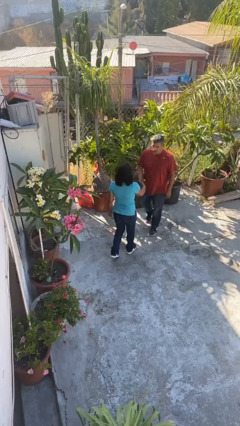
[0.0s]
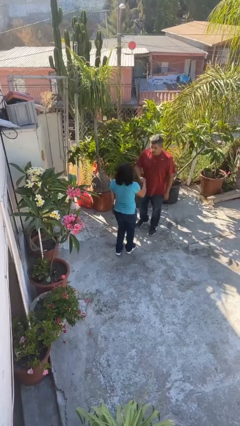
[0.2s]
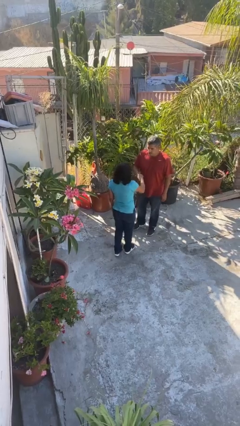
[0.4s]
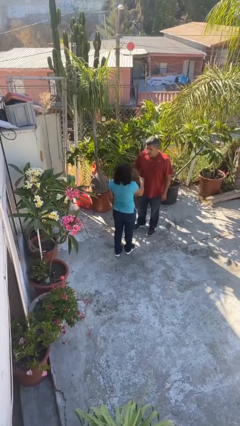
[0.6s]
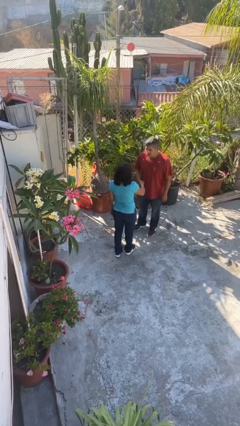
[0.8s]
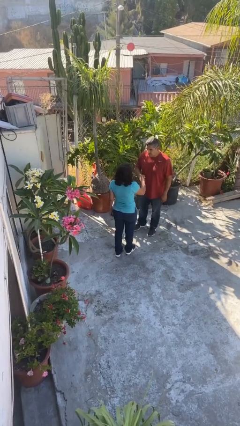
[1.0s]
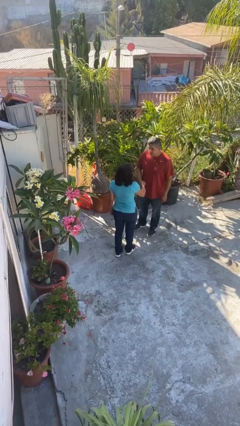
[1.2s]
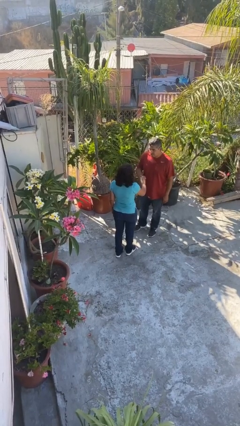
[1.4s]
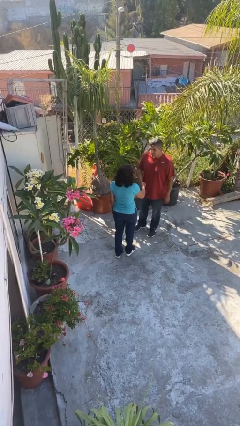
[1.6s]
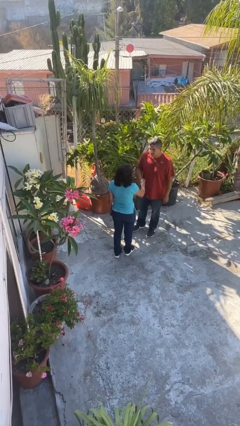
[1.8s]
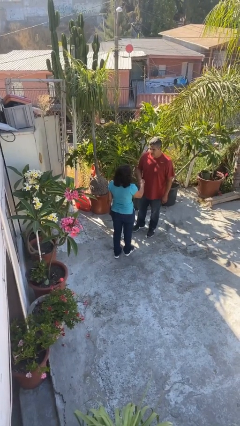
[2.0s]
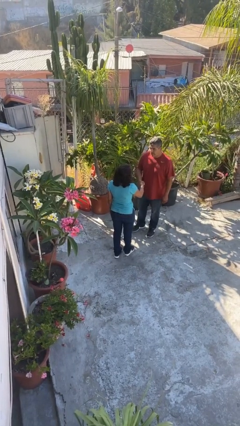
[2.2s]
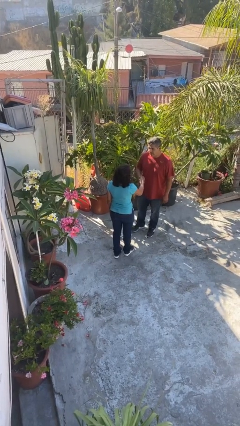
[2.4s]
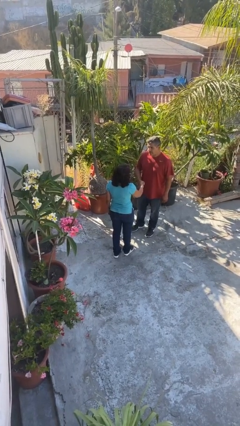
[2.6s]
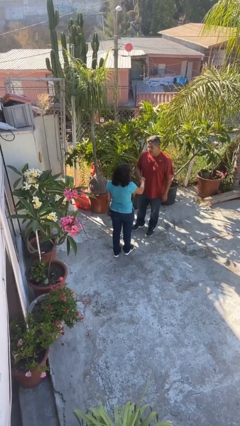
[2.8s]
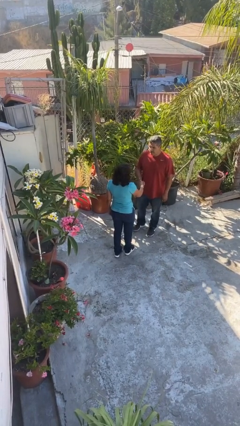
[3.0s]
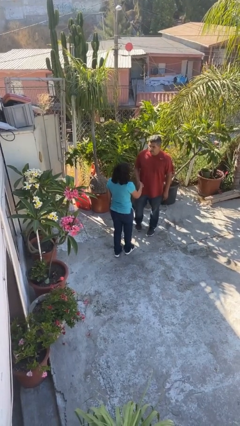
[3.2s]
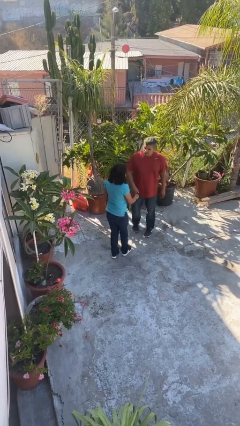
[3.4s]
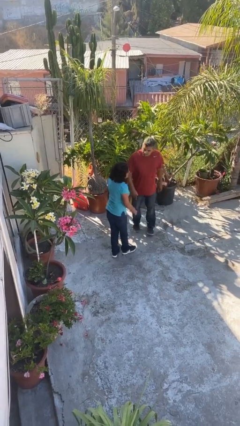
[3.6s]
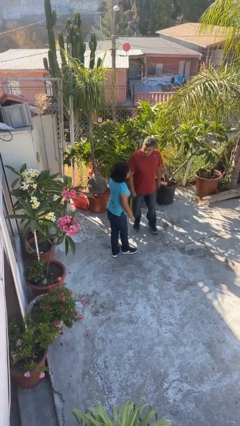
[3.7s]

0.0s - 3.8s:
person shakes hand

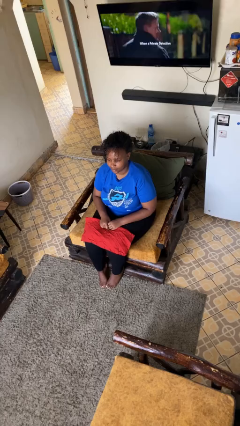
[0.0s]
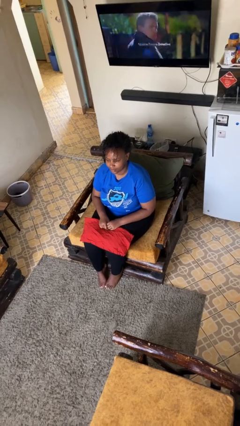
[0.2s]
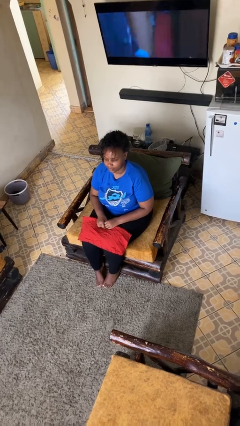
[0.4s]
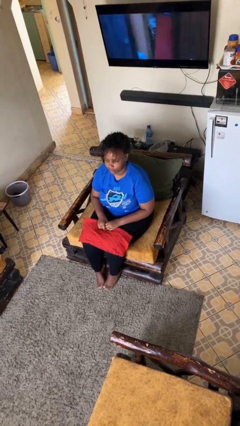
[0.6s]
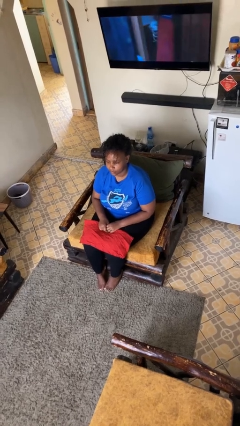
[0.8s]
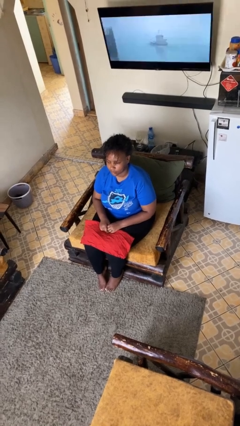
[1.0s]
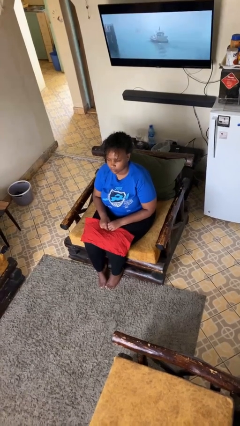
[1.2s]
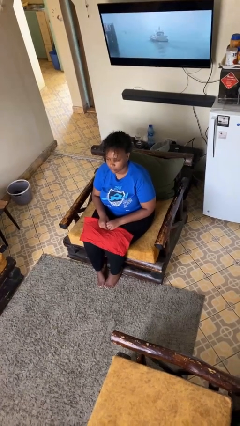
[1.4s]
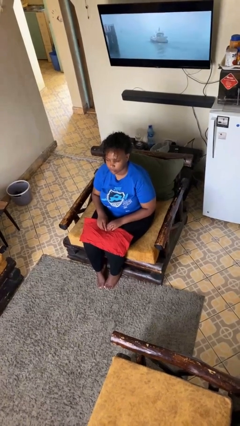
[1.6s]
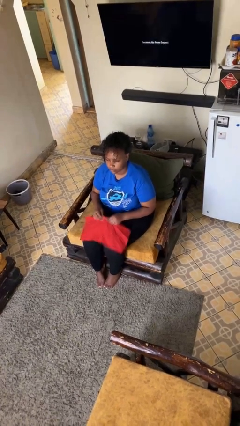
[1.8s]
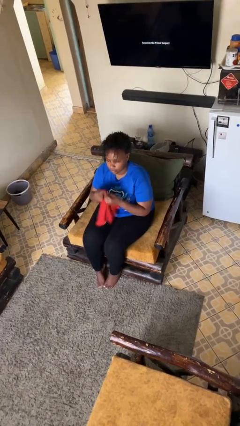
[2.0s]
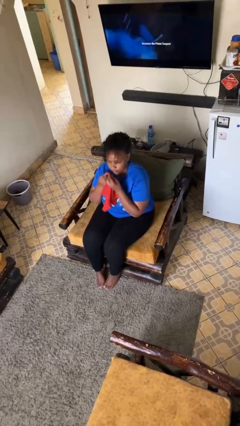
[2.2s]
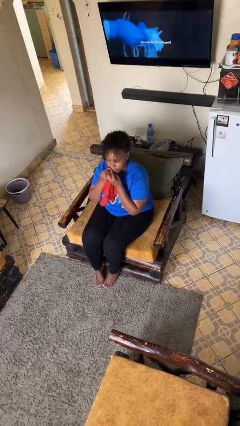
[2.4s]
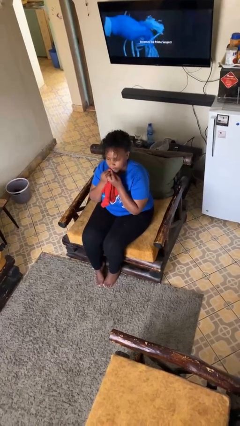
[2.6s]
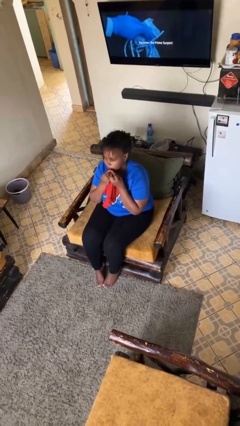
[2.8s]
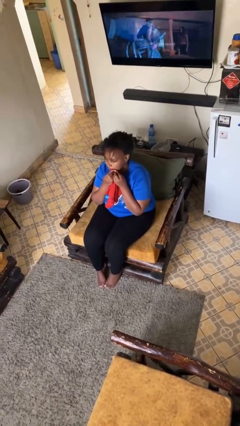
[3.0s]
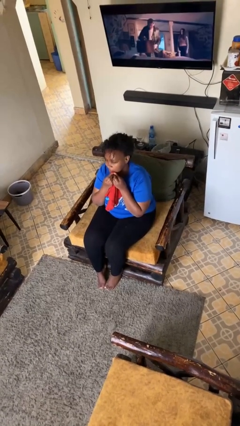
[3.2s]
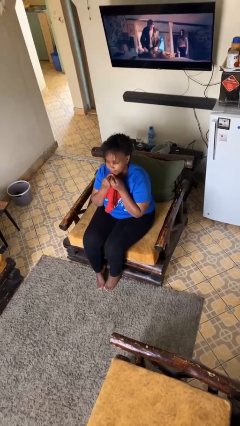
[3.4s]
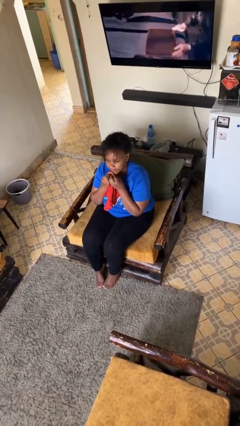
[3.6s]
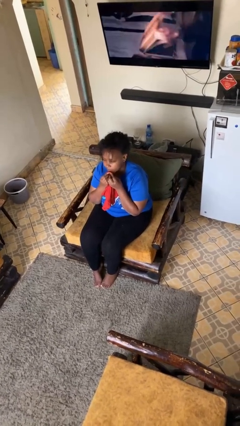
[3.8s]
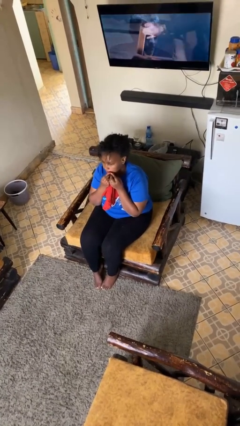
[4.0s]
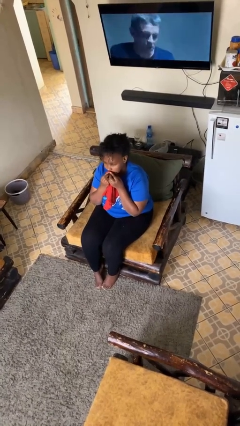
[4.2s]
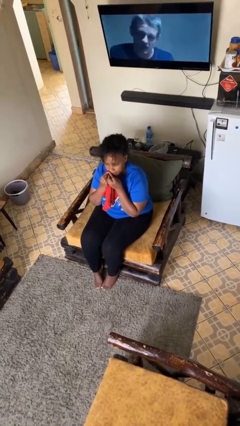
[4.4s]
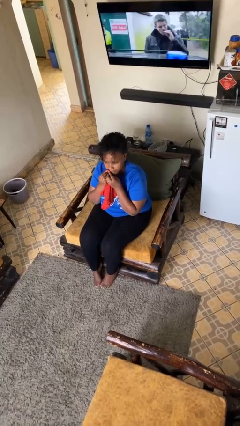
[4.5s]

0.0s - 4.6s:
person wipes mouth with napkin

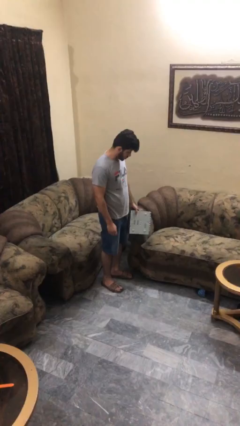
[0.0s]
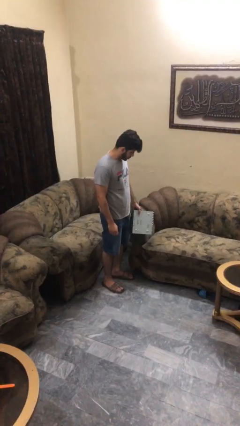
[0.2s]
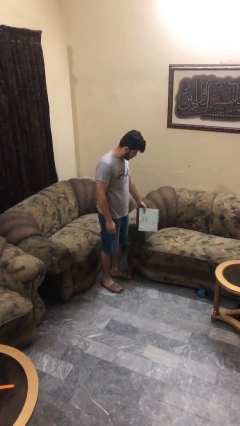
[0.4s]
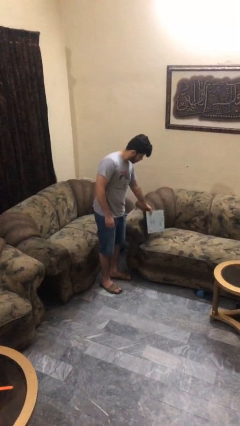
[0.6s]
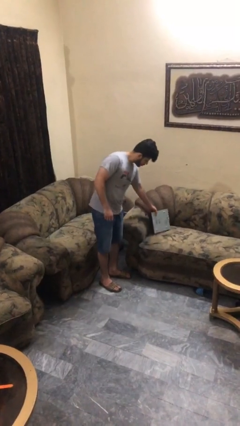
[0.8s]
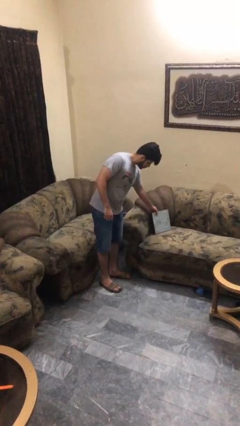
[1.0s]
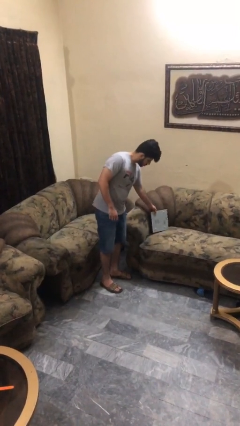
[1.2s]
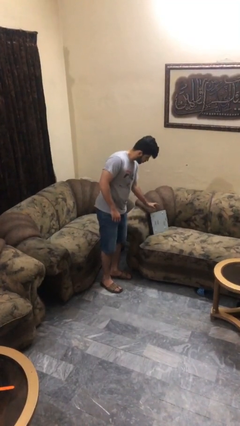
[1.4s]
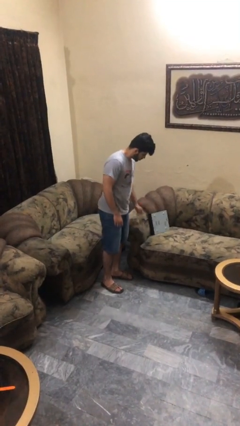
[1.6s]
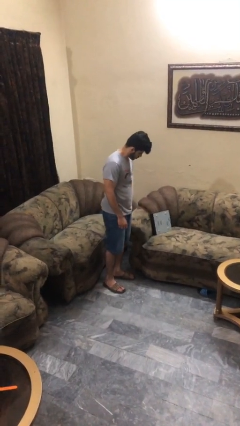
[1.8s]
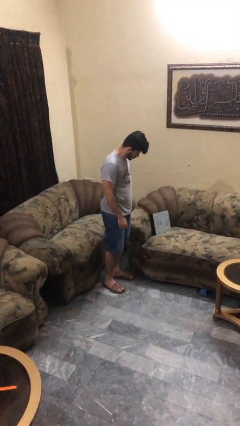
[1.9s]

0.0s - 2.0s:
person puts down object on couch

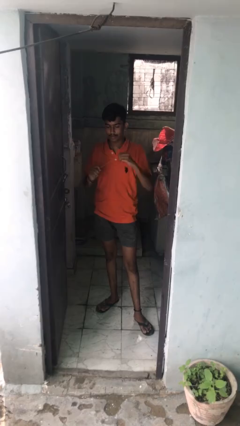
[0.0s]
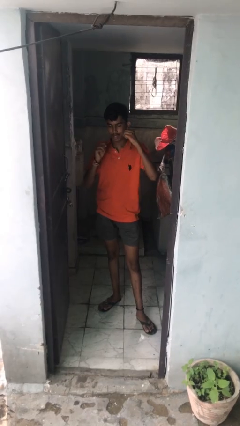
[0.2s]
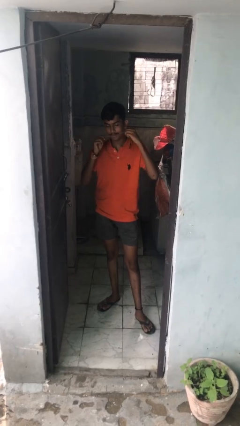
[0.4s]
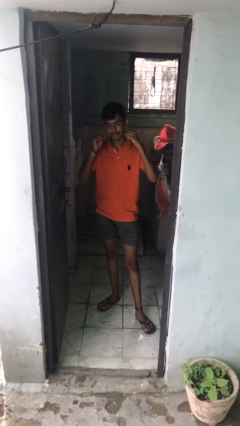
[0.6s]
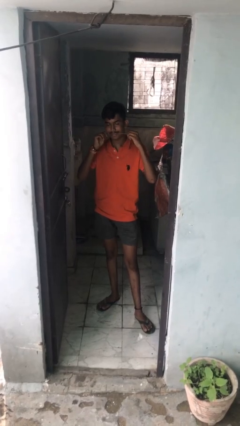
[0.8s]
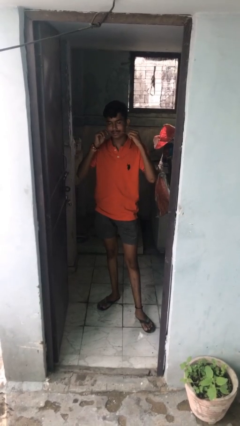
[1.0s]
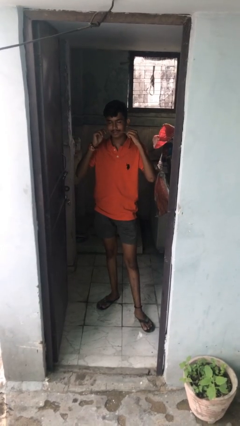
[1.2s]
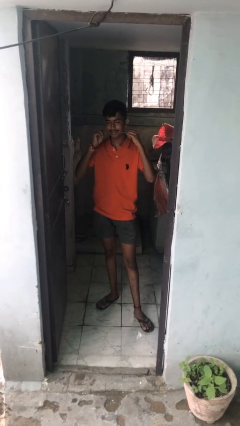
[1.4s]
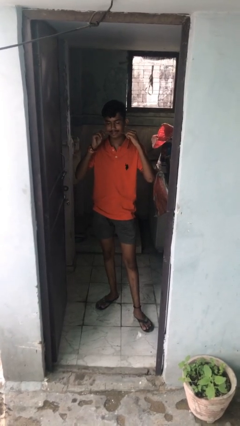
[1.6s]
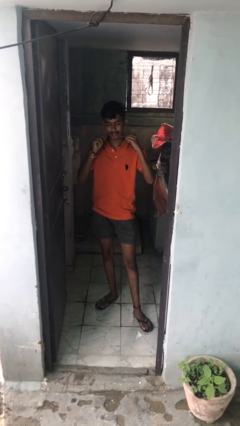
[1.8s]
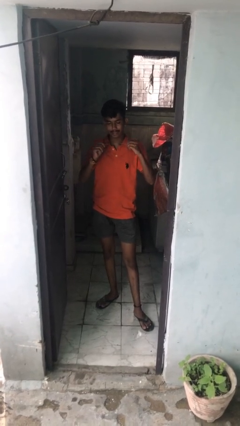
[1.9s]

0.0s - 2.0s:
person flosses

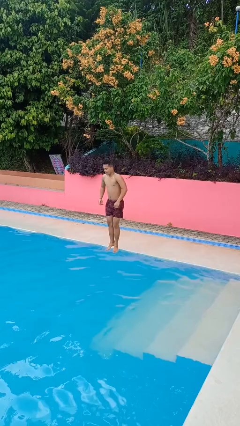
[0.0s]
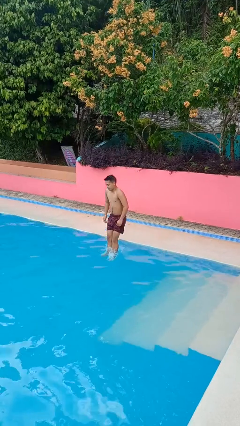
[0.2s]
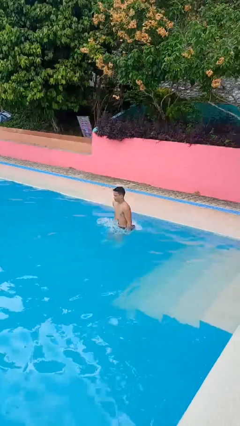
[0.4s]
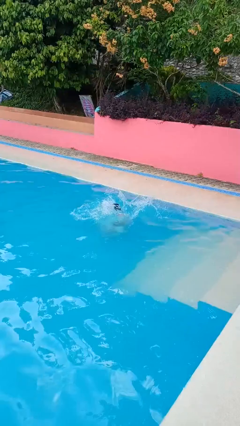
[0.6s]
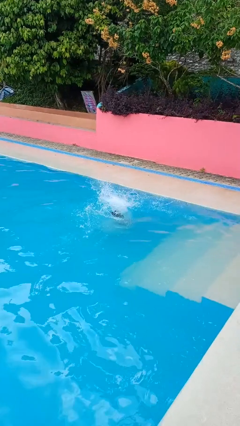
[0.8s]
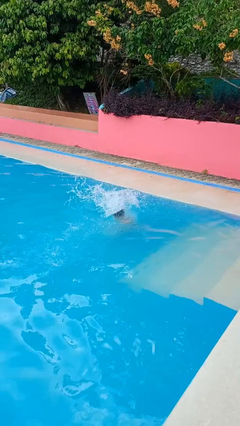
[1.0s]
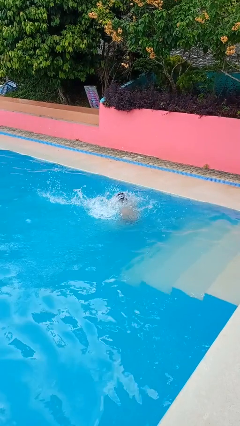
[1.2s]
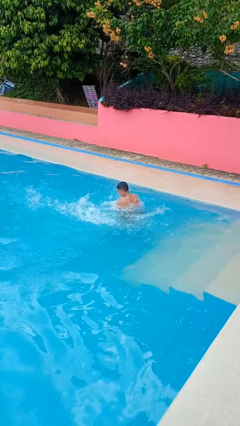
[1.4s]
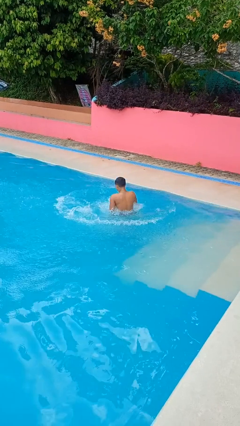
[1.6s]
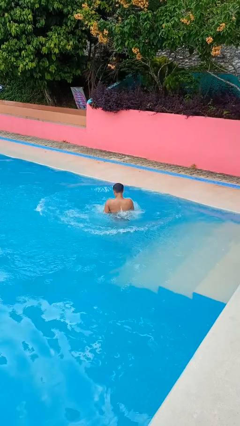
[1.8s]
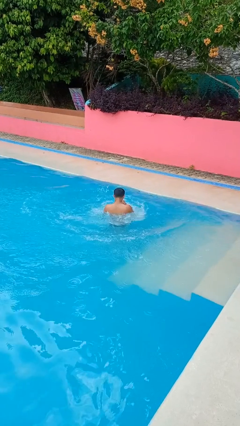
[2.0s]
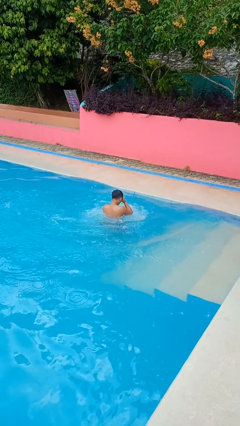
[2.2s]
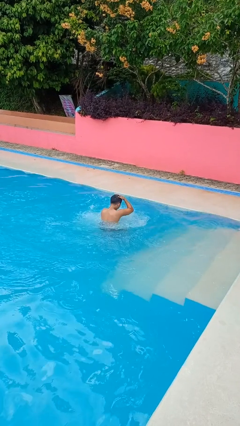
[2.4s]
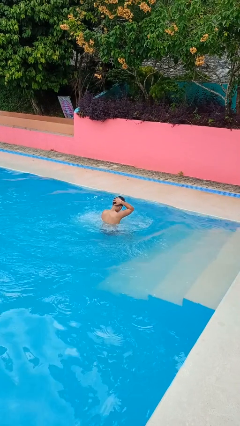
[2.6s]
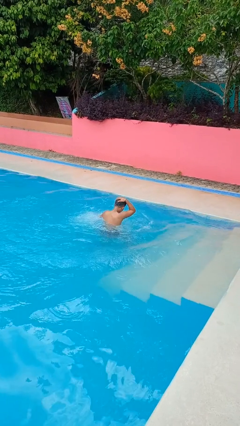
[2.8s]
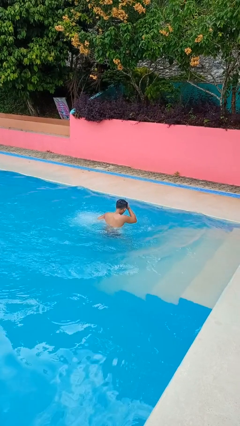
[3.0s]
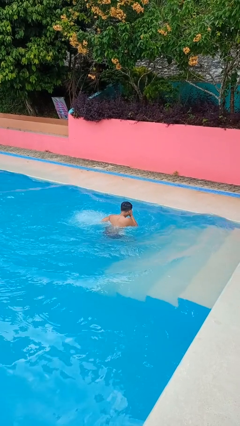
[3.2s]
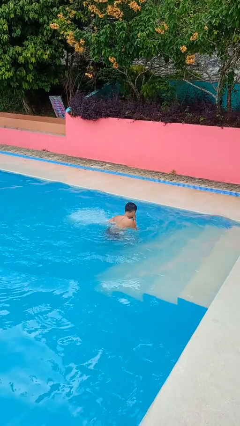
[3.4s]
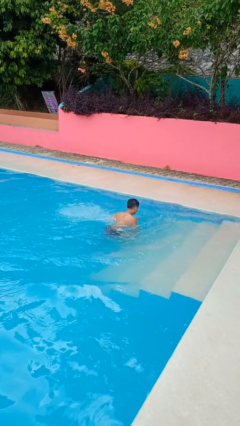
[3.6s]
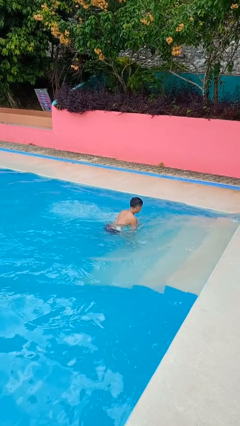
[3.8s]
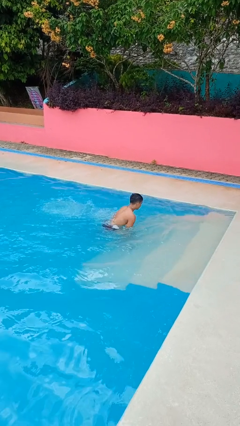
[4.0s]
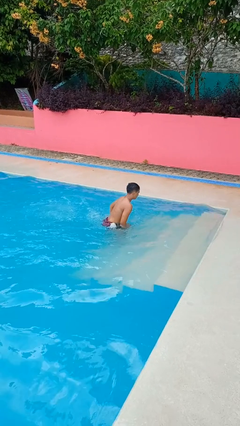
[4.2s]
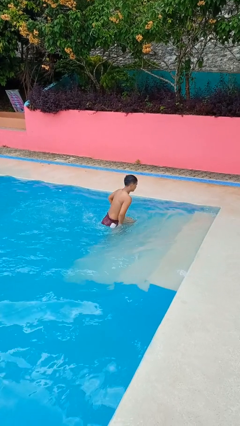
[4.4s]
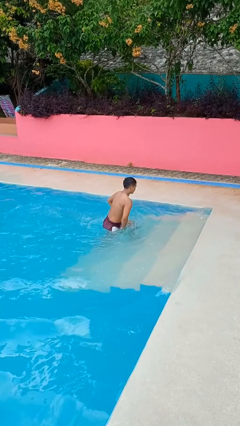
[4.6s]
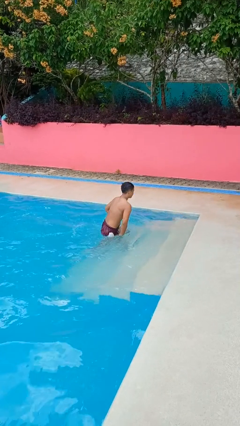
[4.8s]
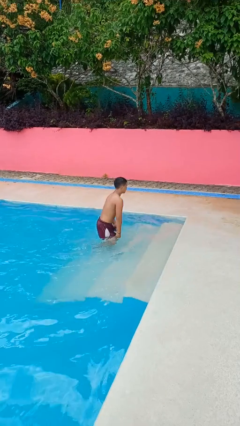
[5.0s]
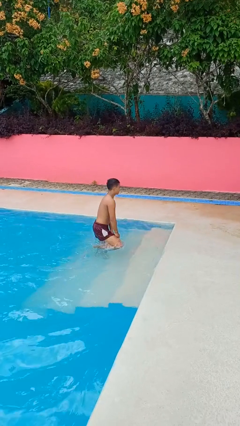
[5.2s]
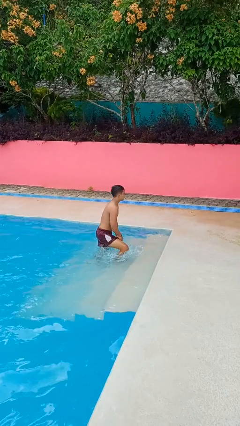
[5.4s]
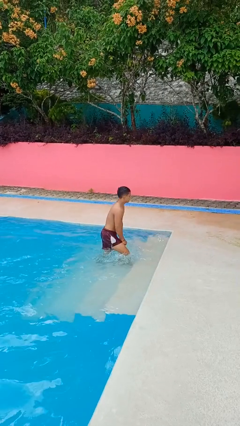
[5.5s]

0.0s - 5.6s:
person jumps into pool
